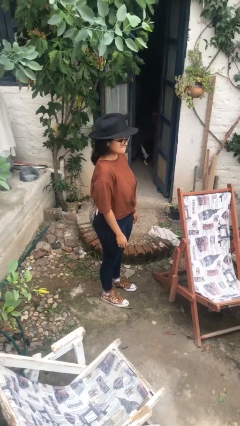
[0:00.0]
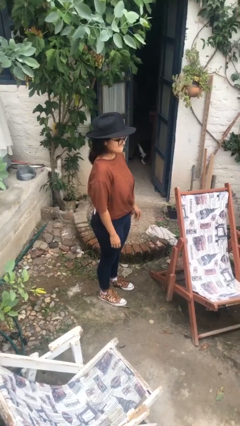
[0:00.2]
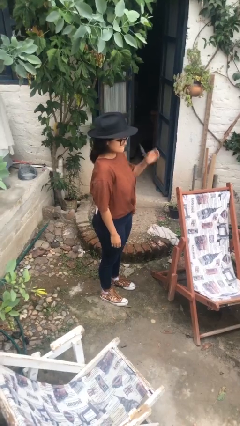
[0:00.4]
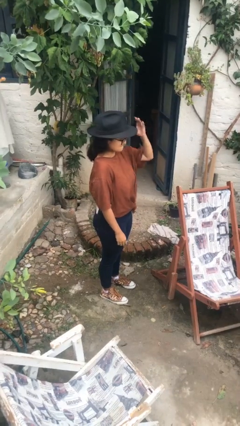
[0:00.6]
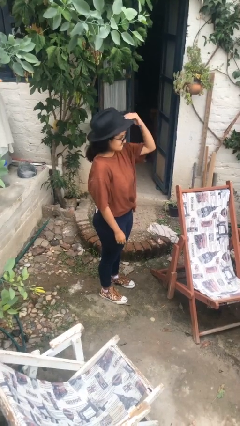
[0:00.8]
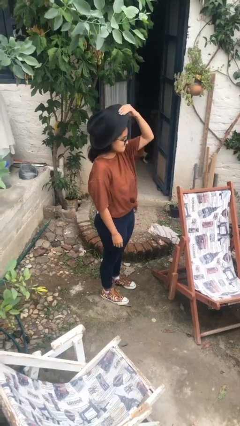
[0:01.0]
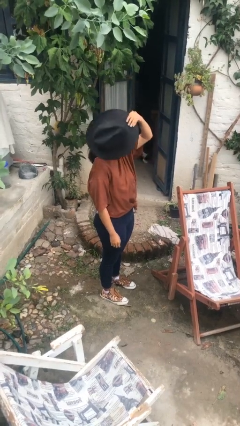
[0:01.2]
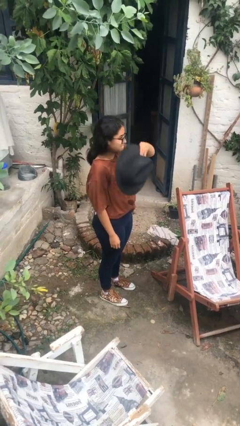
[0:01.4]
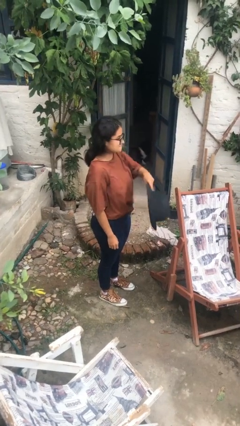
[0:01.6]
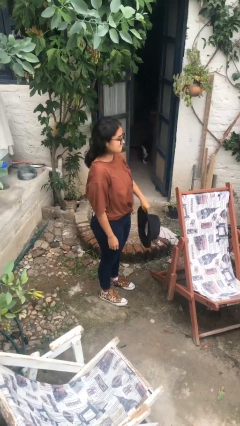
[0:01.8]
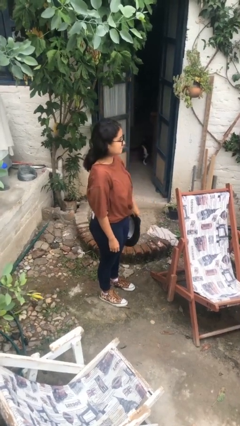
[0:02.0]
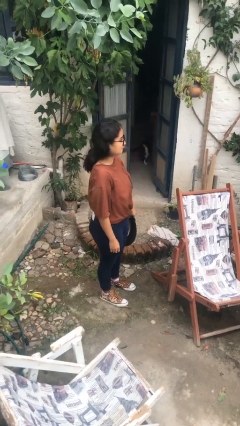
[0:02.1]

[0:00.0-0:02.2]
person takes off hat

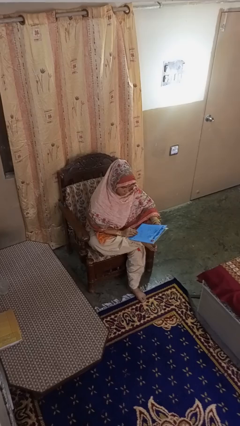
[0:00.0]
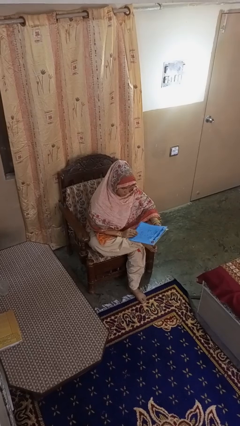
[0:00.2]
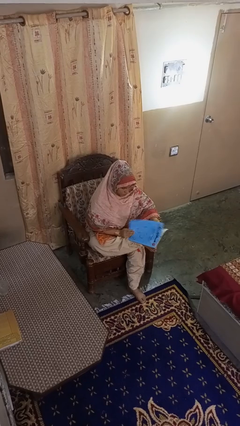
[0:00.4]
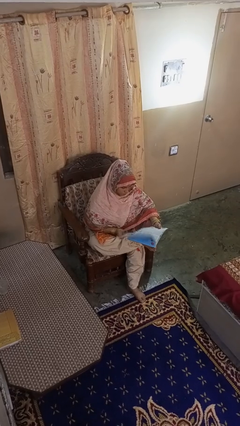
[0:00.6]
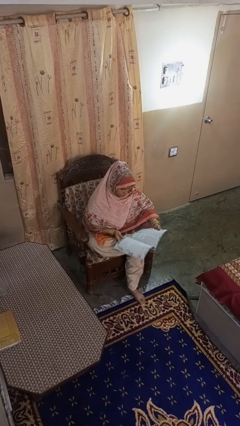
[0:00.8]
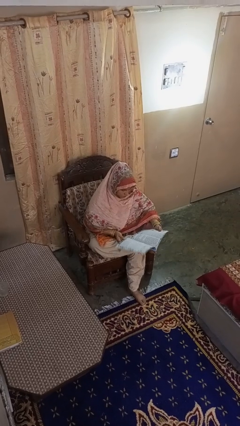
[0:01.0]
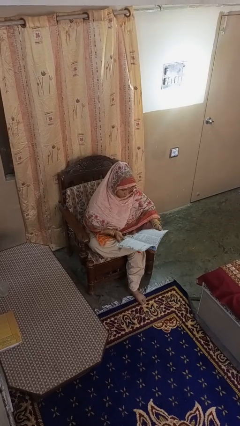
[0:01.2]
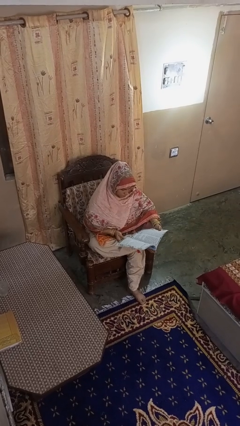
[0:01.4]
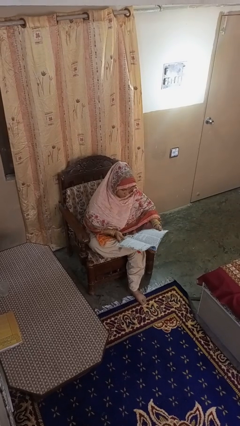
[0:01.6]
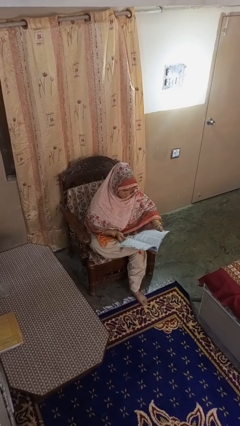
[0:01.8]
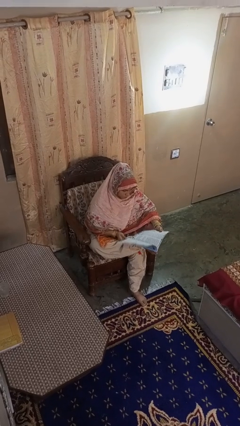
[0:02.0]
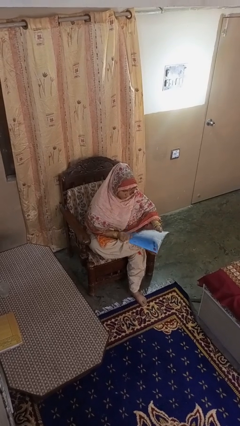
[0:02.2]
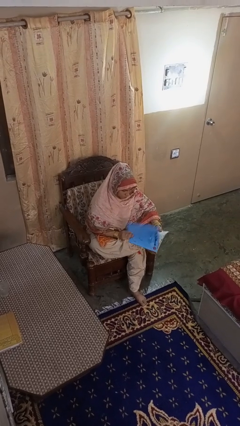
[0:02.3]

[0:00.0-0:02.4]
person reads magazine

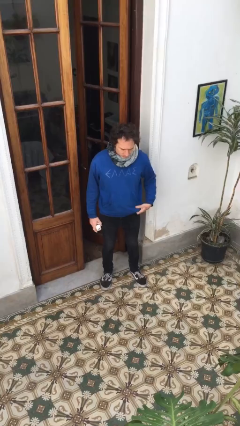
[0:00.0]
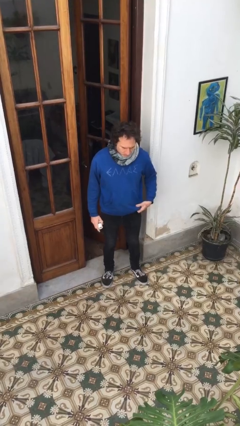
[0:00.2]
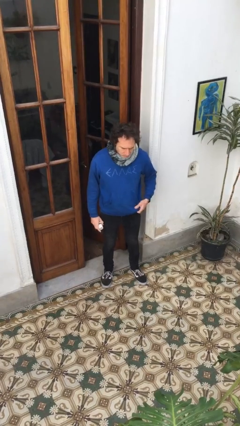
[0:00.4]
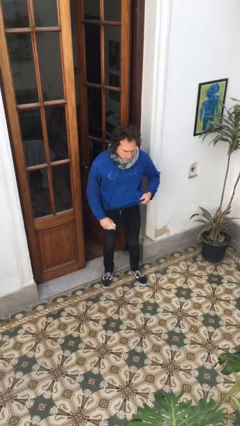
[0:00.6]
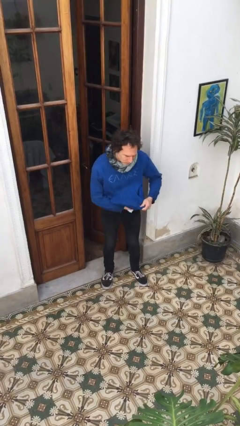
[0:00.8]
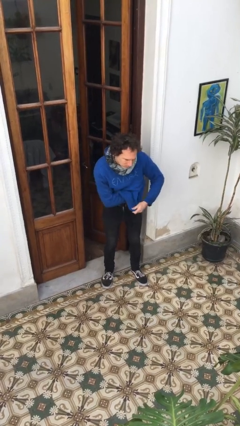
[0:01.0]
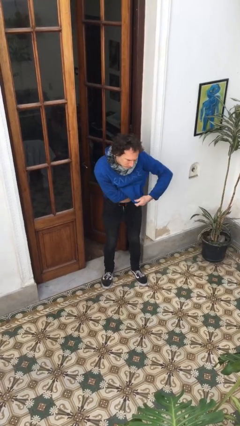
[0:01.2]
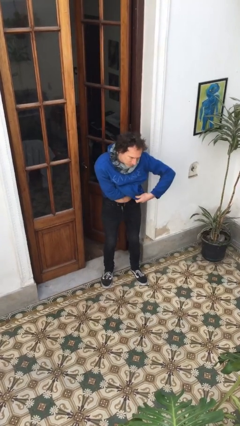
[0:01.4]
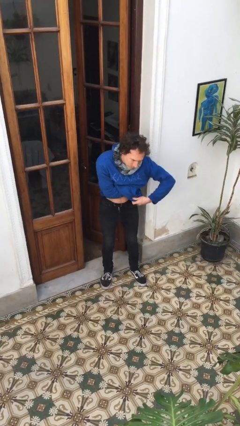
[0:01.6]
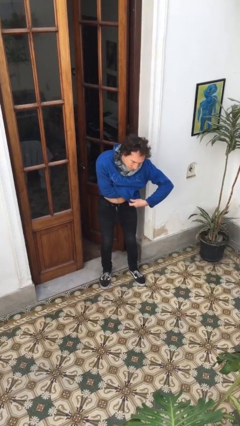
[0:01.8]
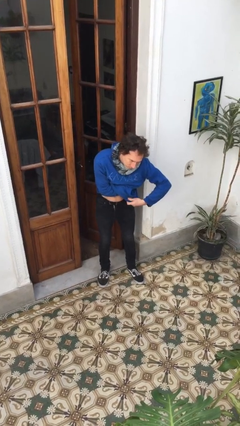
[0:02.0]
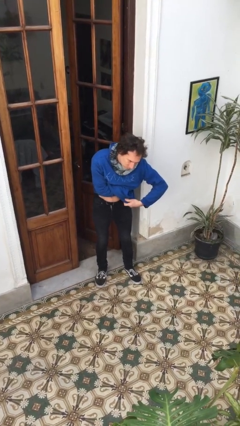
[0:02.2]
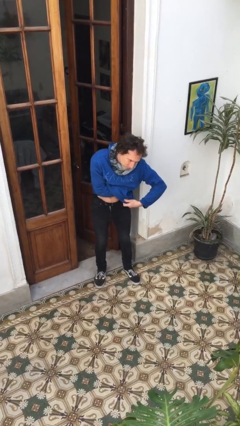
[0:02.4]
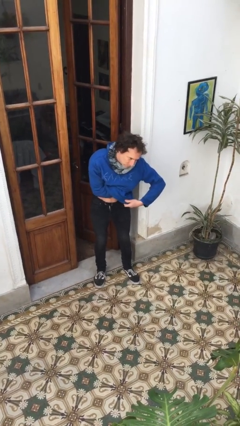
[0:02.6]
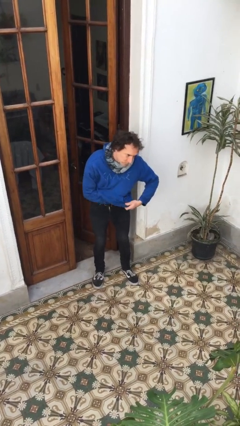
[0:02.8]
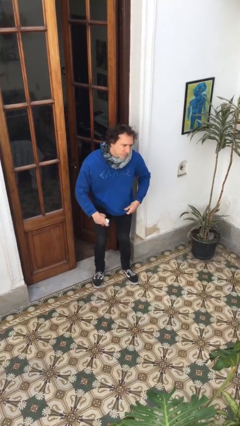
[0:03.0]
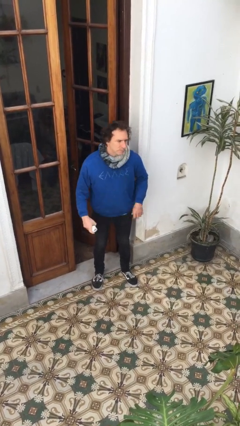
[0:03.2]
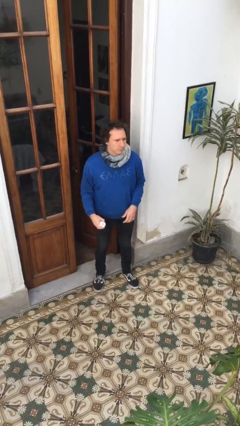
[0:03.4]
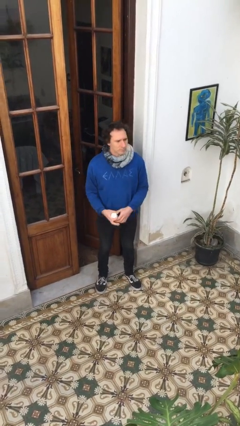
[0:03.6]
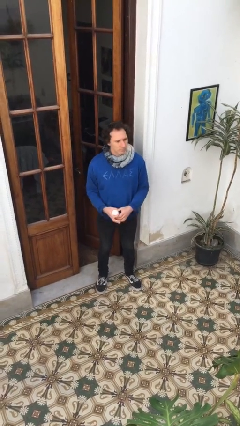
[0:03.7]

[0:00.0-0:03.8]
person applies deodorant

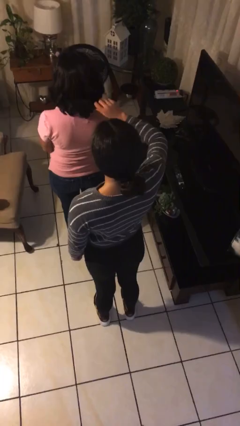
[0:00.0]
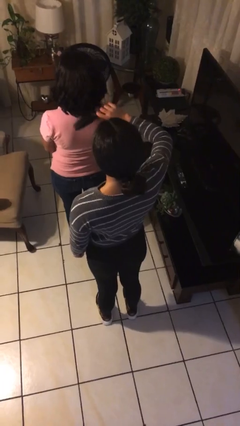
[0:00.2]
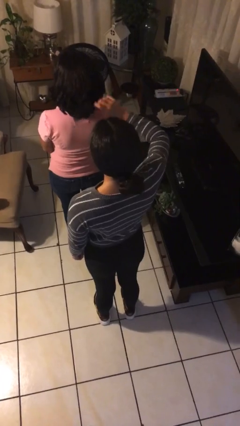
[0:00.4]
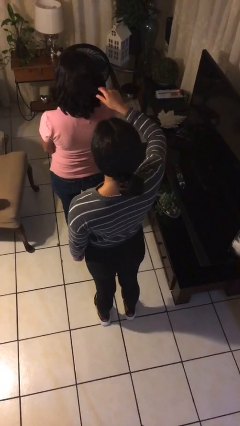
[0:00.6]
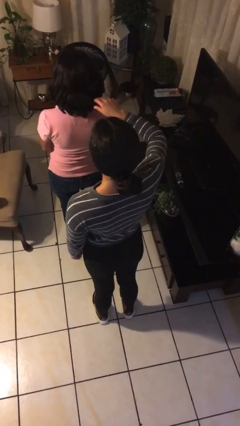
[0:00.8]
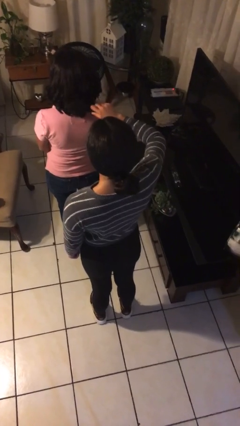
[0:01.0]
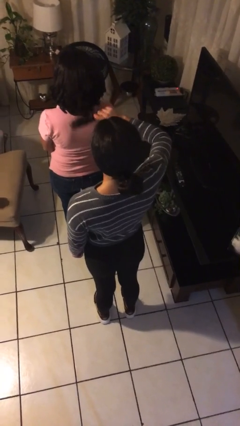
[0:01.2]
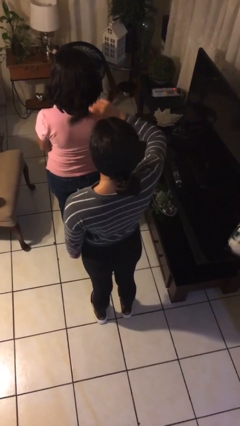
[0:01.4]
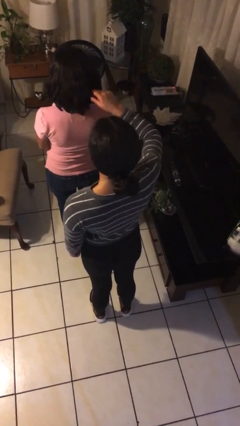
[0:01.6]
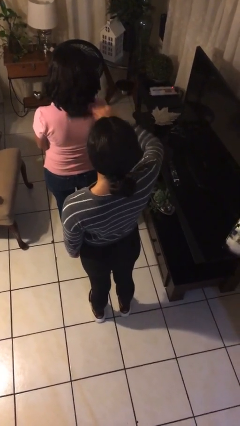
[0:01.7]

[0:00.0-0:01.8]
person brushes hair of person

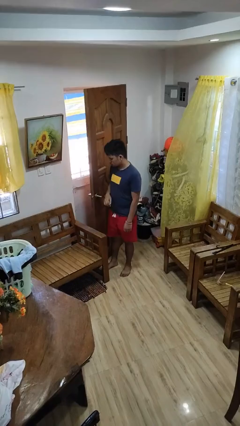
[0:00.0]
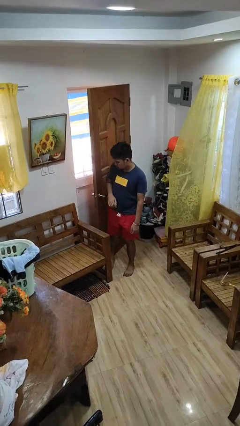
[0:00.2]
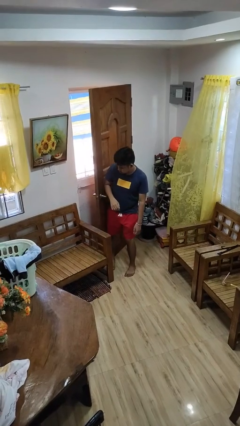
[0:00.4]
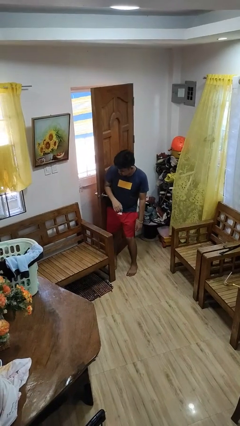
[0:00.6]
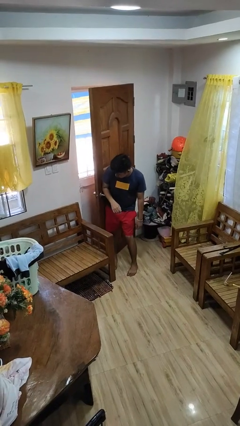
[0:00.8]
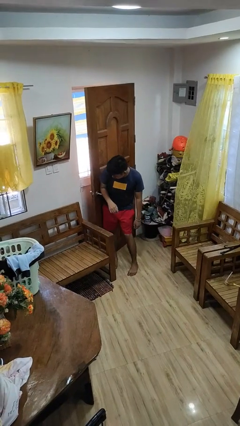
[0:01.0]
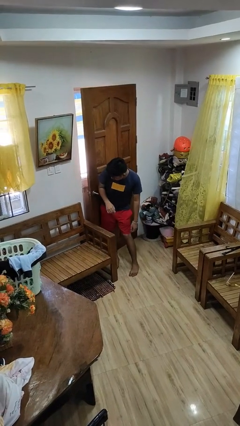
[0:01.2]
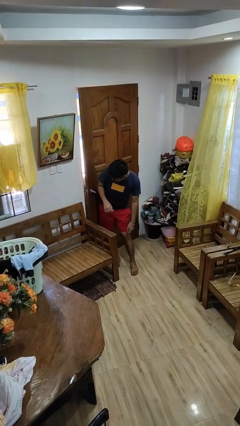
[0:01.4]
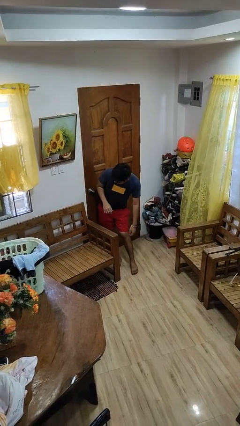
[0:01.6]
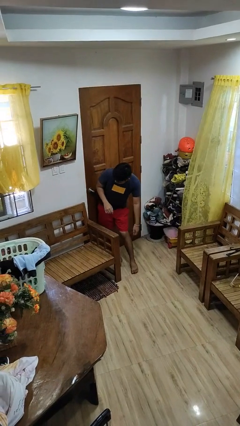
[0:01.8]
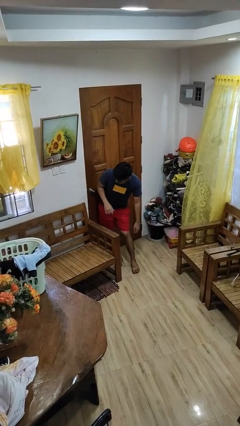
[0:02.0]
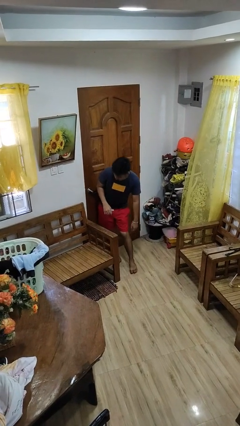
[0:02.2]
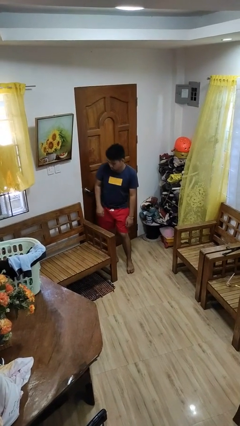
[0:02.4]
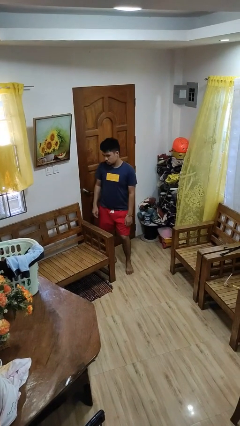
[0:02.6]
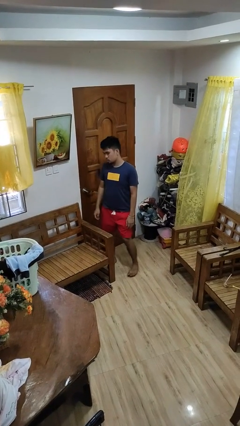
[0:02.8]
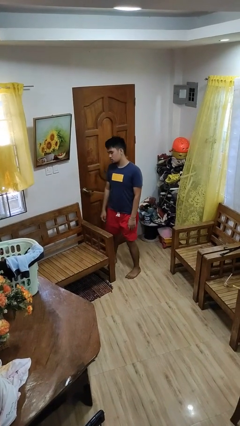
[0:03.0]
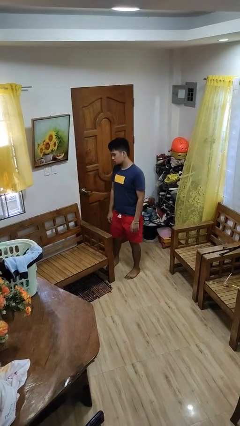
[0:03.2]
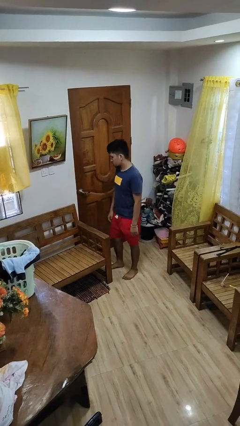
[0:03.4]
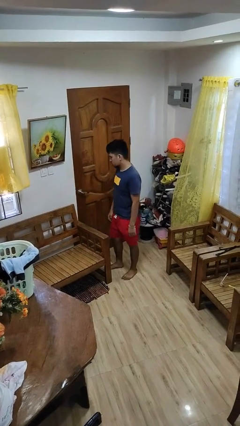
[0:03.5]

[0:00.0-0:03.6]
person closes door with hip

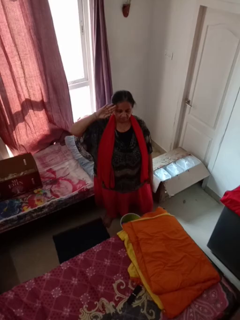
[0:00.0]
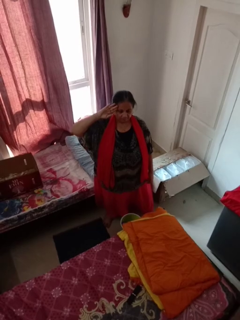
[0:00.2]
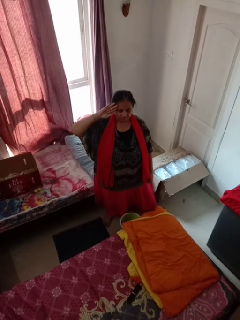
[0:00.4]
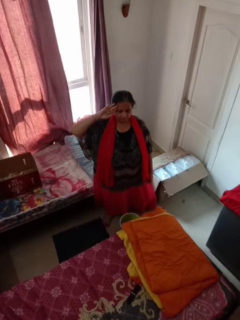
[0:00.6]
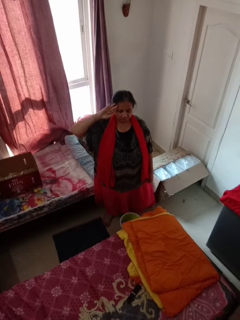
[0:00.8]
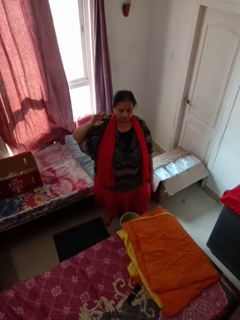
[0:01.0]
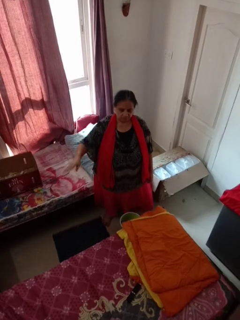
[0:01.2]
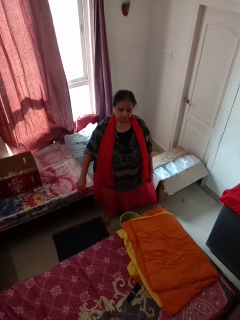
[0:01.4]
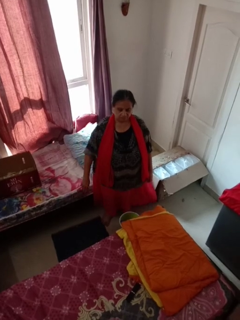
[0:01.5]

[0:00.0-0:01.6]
person salutes

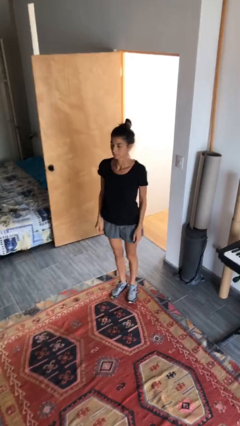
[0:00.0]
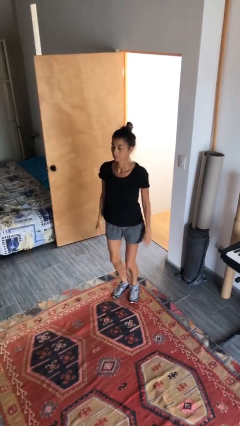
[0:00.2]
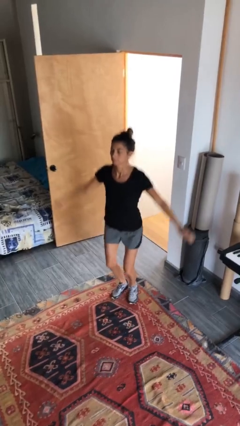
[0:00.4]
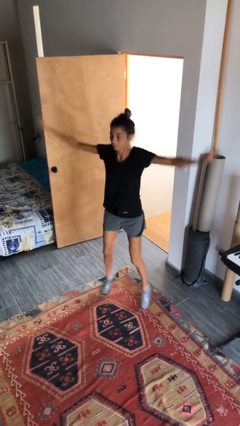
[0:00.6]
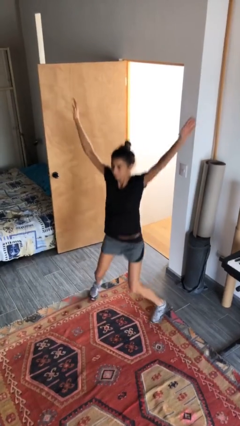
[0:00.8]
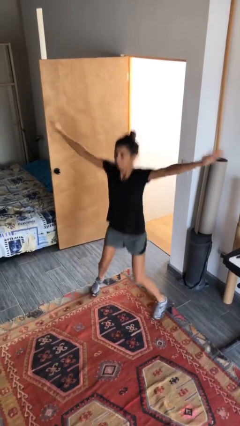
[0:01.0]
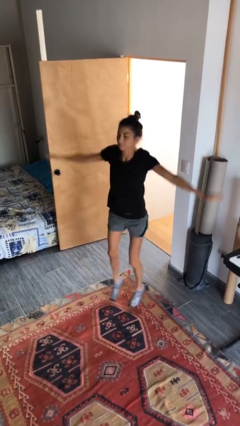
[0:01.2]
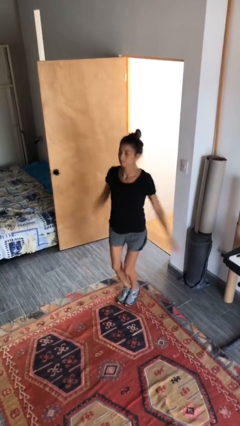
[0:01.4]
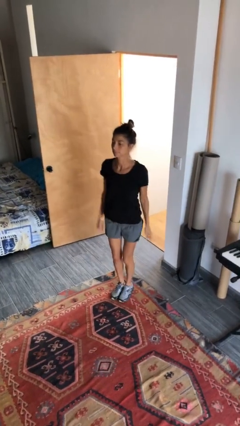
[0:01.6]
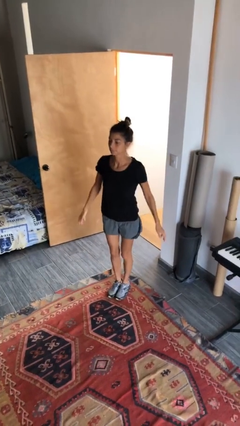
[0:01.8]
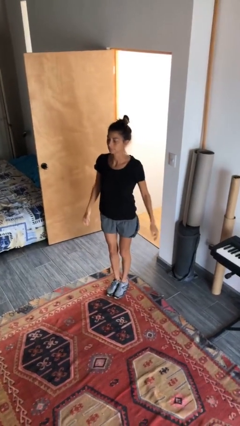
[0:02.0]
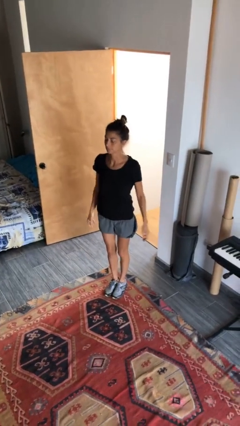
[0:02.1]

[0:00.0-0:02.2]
person exercises with jumping jacks
